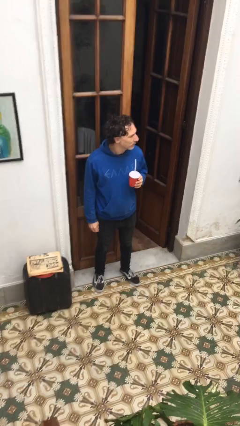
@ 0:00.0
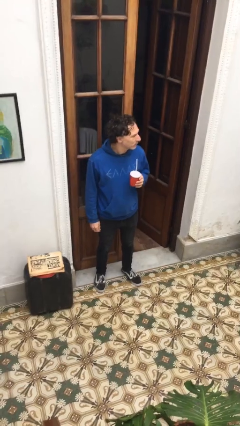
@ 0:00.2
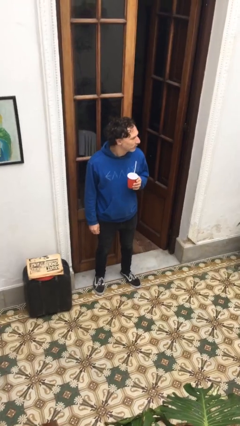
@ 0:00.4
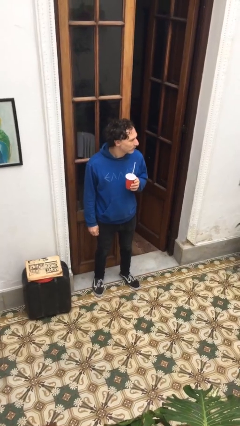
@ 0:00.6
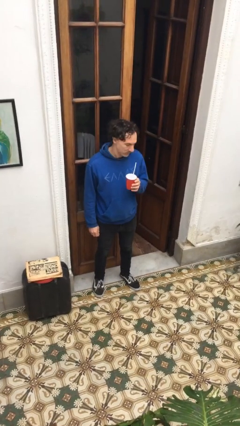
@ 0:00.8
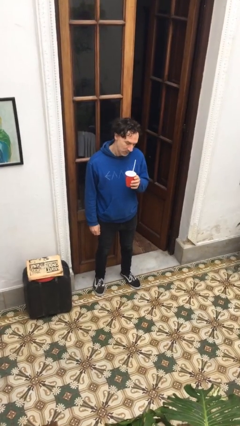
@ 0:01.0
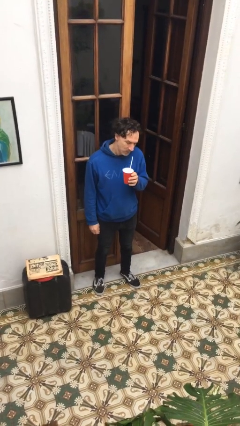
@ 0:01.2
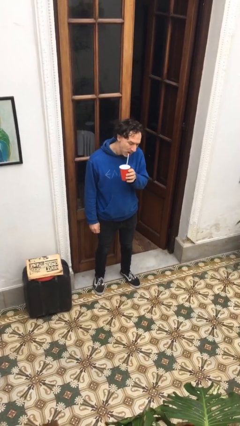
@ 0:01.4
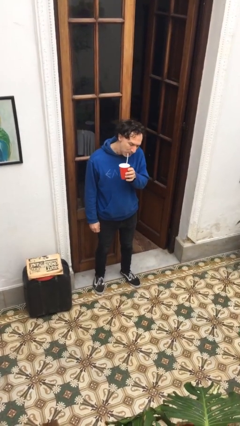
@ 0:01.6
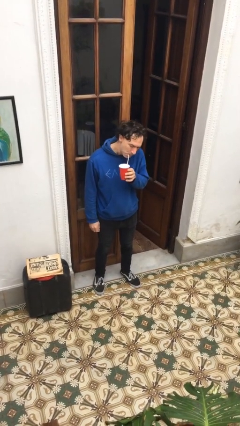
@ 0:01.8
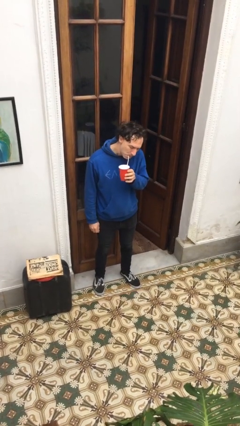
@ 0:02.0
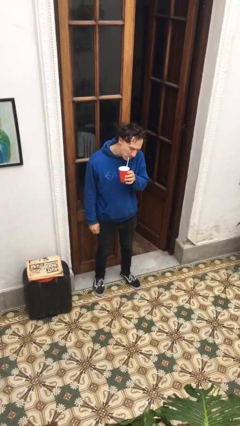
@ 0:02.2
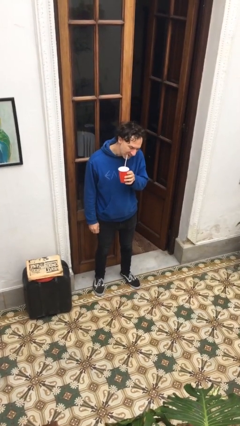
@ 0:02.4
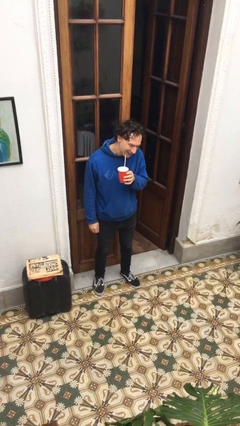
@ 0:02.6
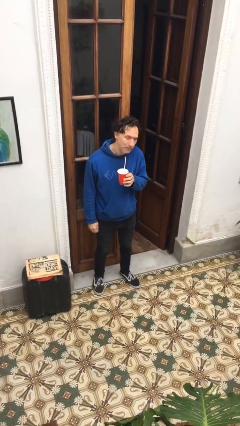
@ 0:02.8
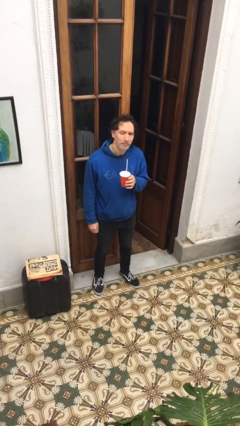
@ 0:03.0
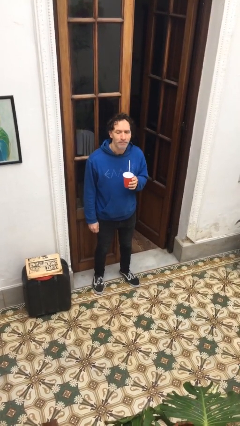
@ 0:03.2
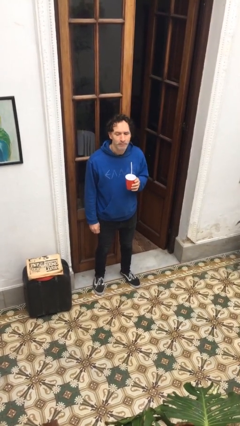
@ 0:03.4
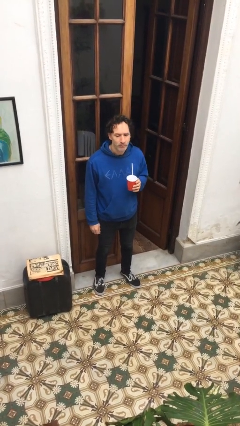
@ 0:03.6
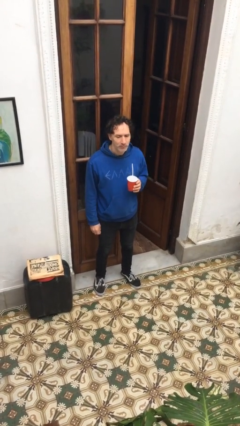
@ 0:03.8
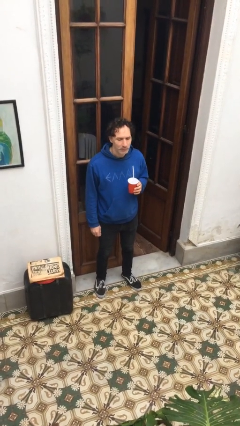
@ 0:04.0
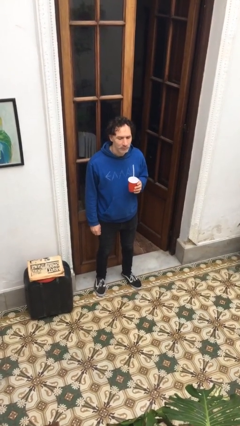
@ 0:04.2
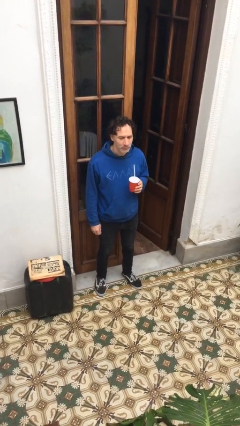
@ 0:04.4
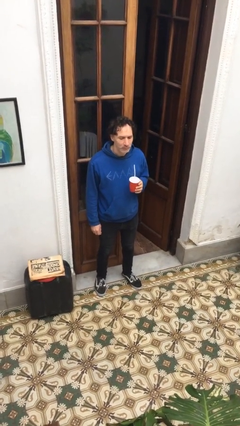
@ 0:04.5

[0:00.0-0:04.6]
person drinks from straw

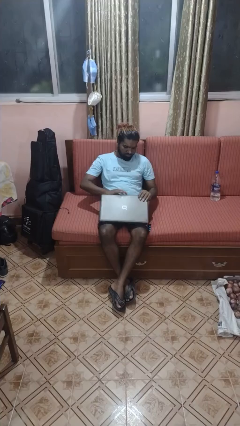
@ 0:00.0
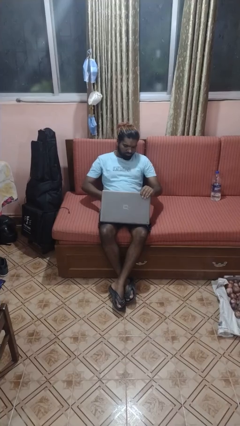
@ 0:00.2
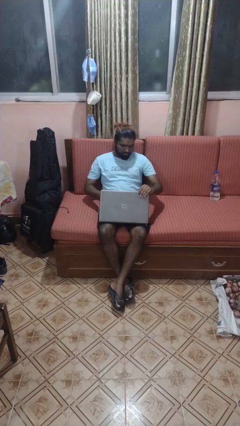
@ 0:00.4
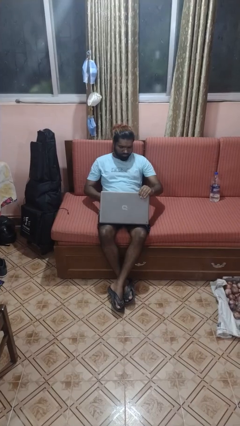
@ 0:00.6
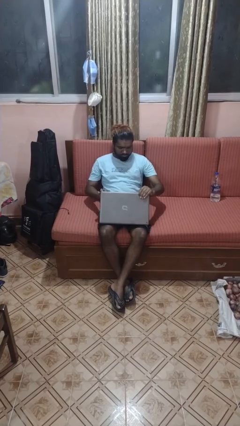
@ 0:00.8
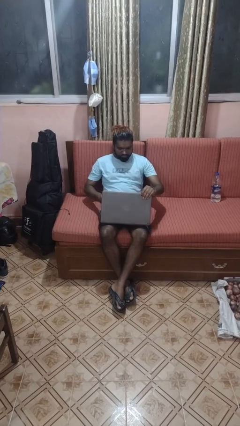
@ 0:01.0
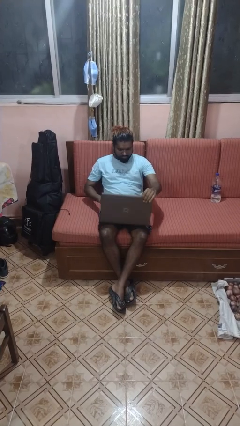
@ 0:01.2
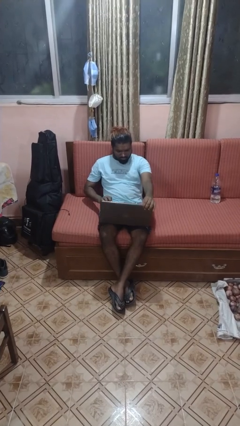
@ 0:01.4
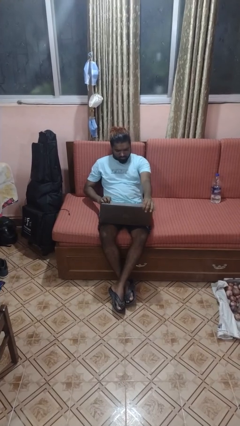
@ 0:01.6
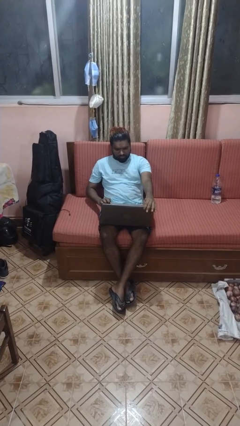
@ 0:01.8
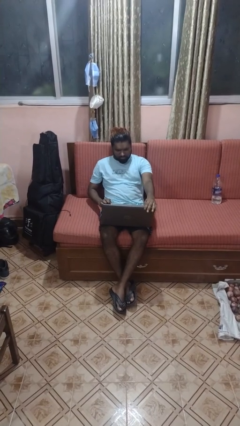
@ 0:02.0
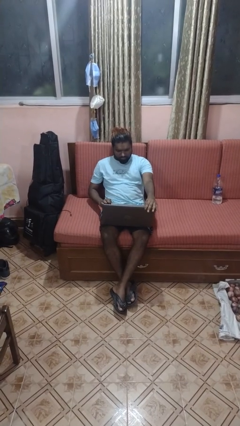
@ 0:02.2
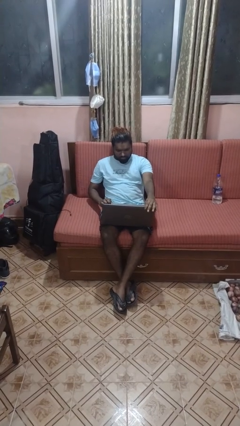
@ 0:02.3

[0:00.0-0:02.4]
person opens laptop

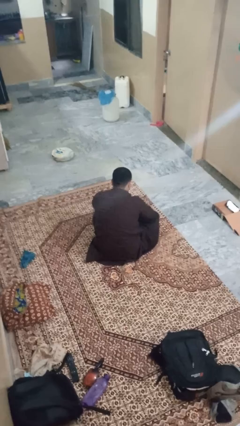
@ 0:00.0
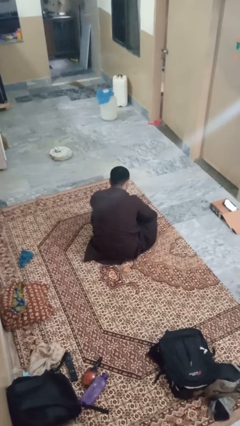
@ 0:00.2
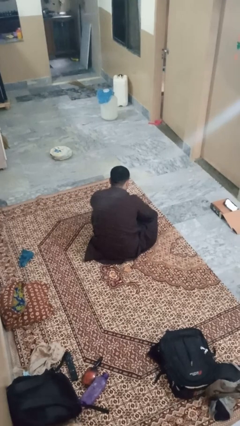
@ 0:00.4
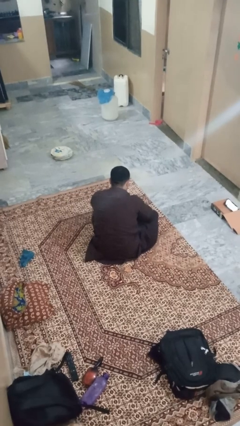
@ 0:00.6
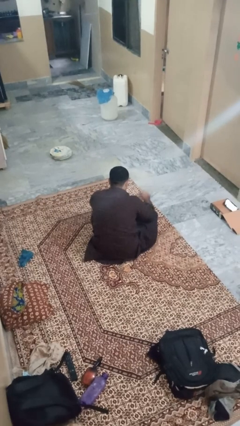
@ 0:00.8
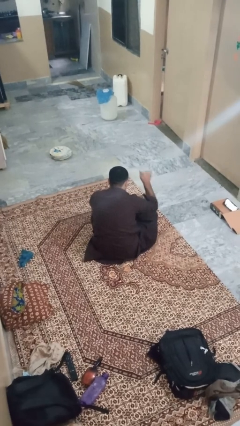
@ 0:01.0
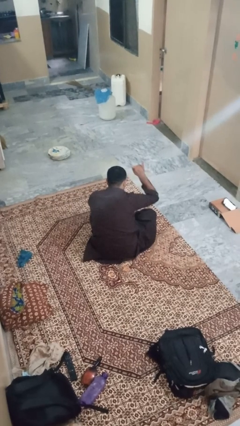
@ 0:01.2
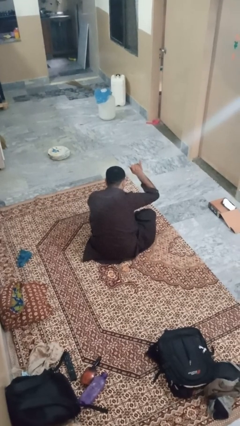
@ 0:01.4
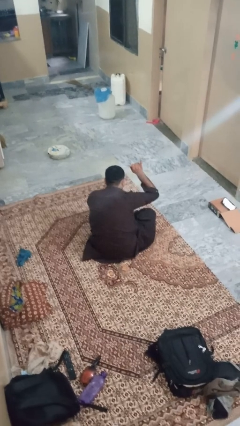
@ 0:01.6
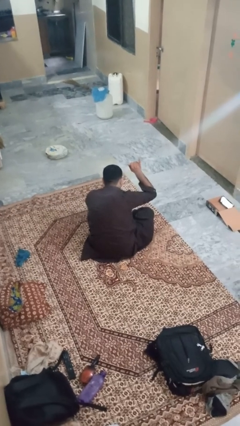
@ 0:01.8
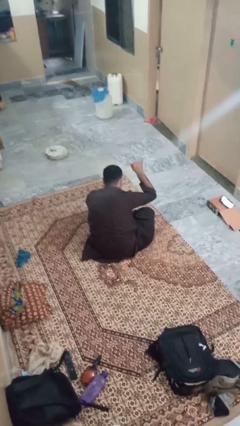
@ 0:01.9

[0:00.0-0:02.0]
person gestures hang loose

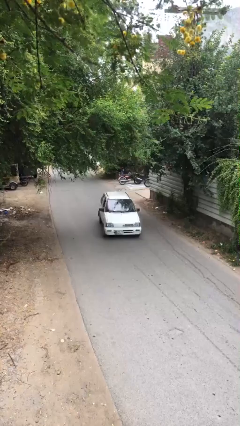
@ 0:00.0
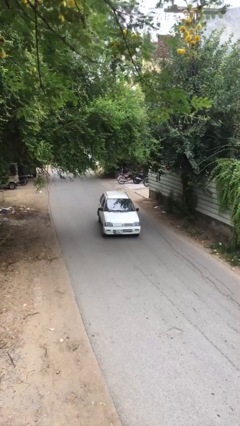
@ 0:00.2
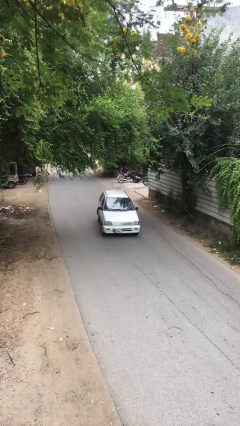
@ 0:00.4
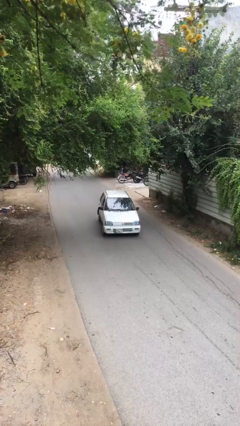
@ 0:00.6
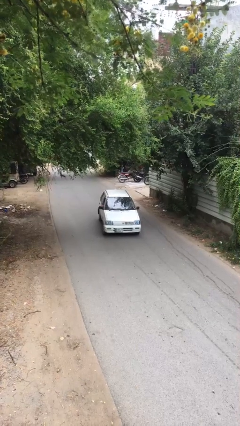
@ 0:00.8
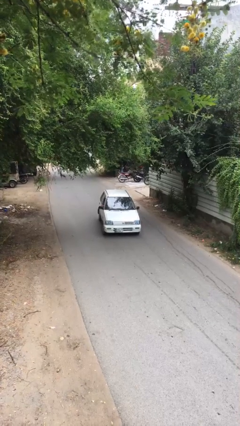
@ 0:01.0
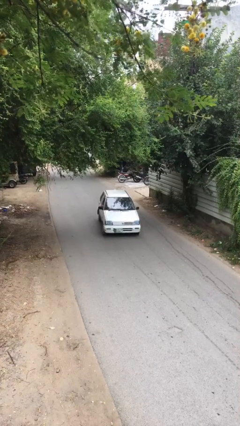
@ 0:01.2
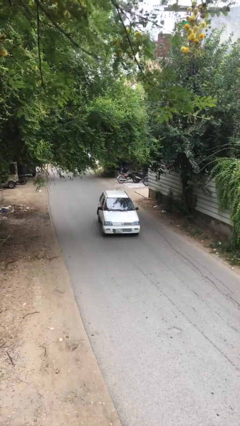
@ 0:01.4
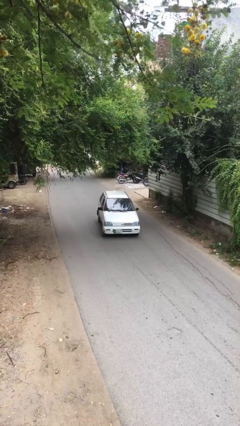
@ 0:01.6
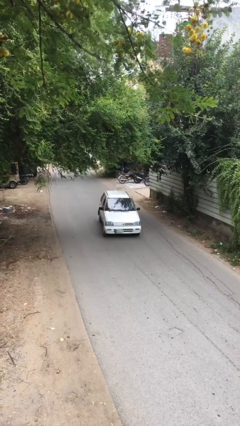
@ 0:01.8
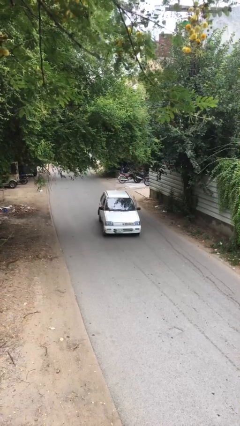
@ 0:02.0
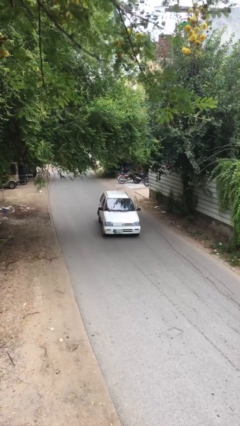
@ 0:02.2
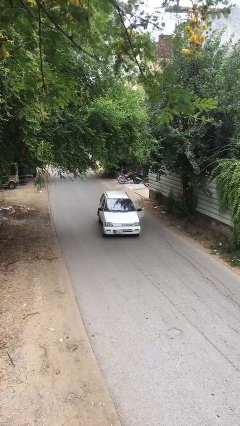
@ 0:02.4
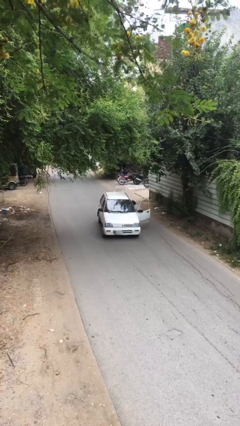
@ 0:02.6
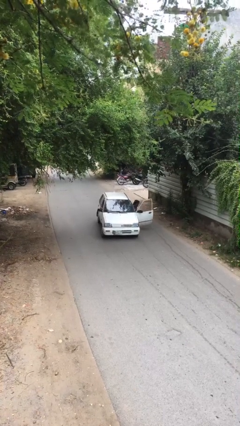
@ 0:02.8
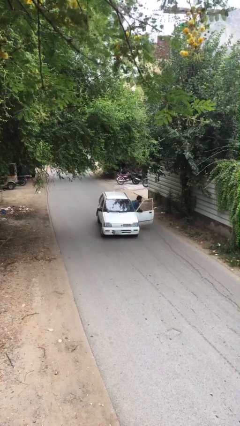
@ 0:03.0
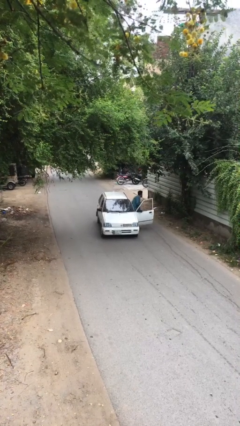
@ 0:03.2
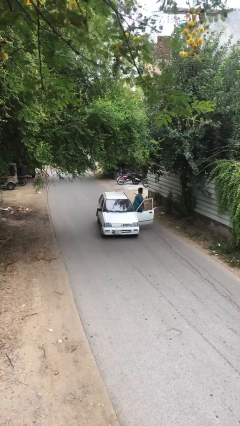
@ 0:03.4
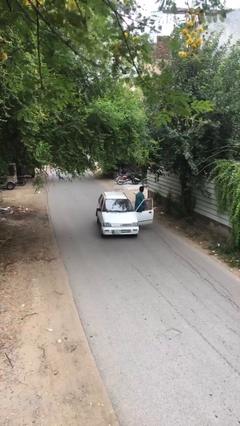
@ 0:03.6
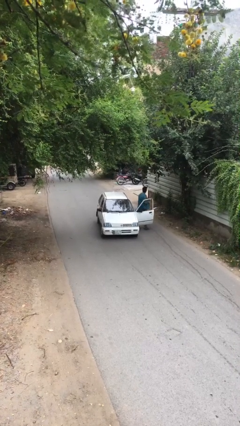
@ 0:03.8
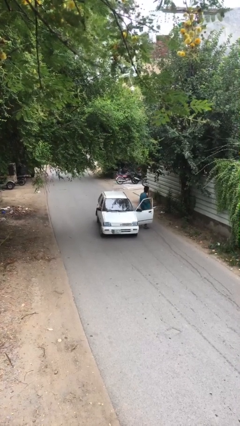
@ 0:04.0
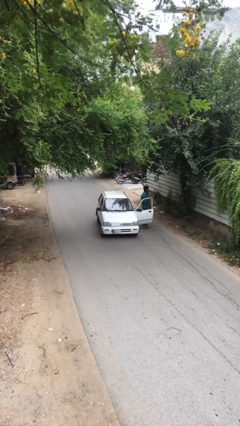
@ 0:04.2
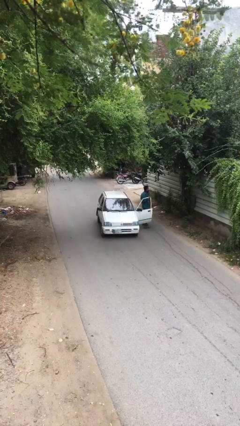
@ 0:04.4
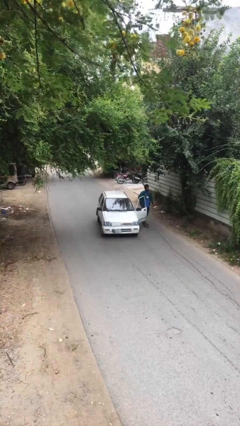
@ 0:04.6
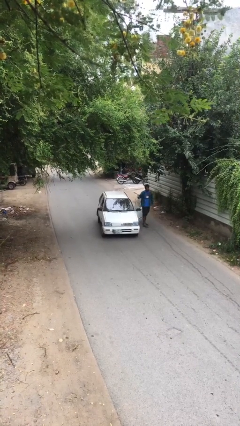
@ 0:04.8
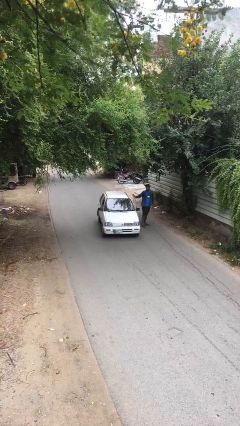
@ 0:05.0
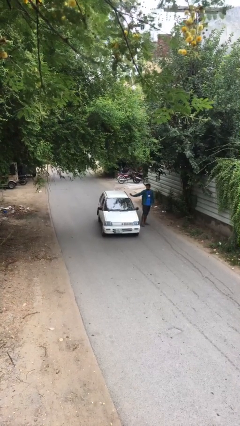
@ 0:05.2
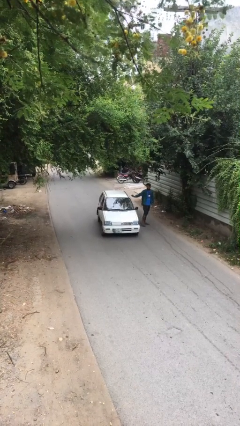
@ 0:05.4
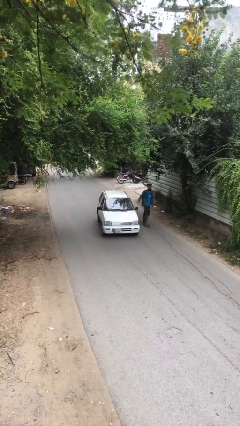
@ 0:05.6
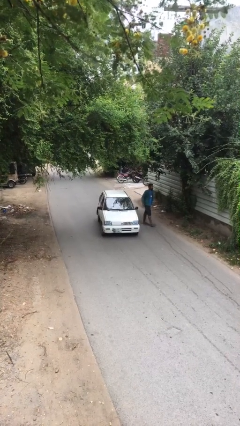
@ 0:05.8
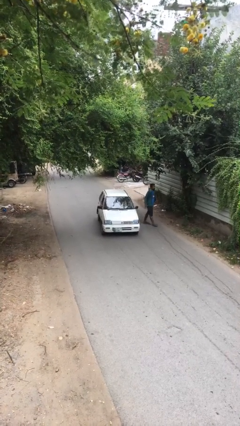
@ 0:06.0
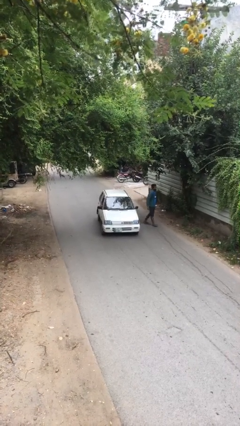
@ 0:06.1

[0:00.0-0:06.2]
car drops off person

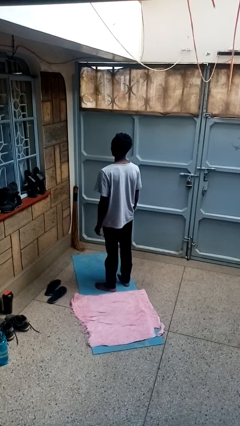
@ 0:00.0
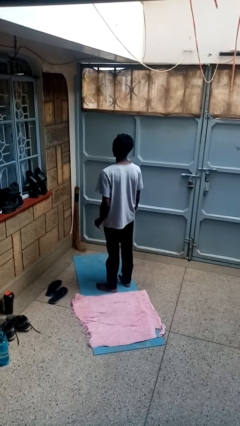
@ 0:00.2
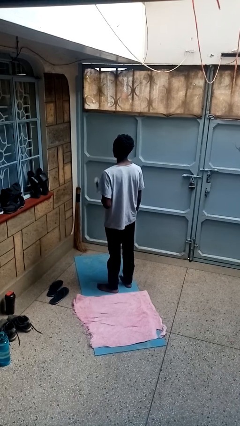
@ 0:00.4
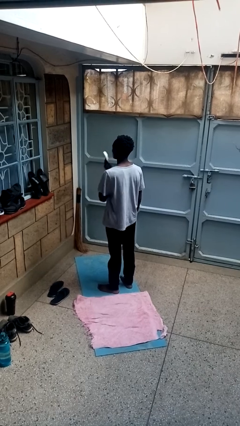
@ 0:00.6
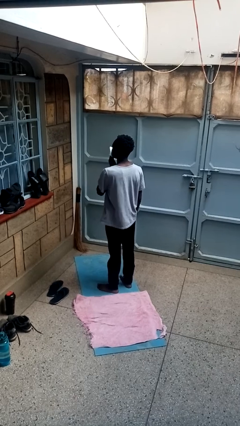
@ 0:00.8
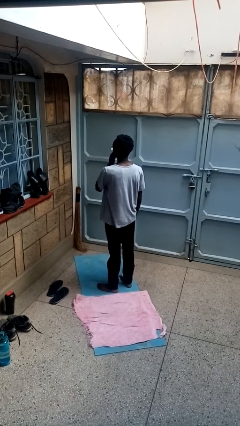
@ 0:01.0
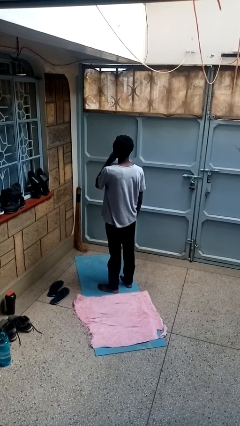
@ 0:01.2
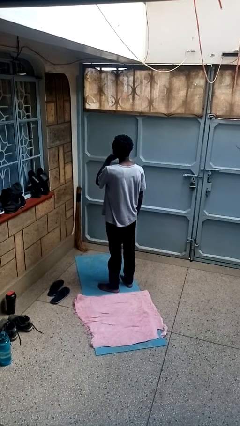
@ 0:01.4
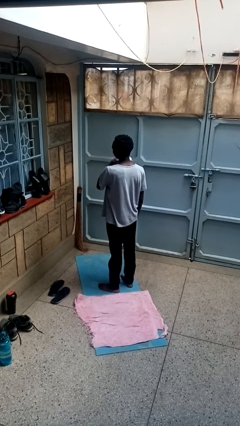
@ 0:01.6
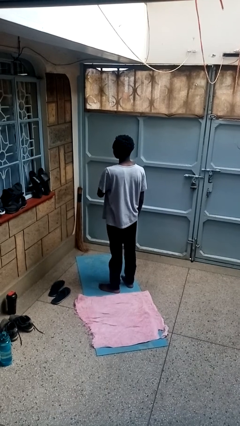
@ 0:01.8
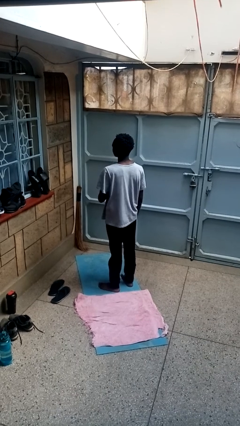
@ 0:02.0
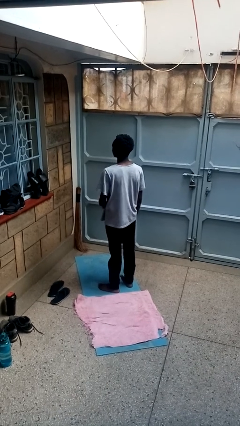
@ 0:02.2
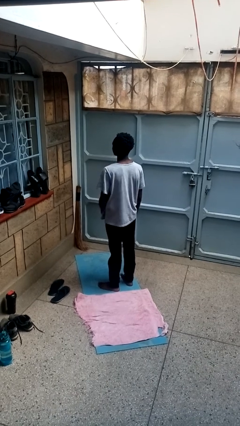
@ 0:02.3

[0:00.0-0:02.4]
person wipes mouth with napkin
